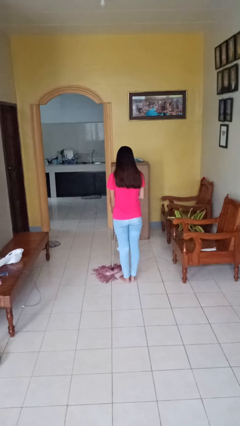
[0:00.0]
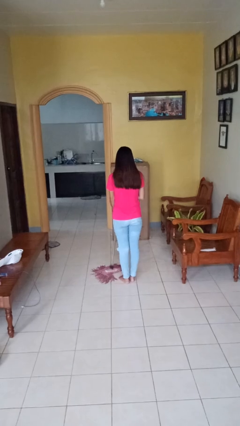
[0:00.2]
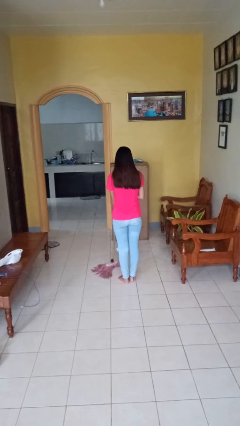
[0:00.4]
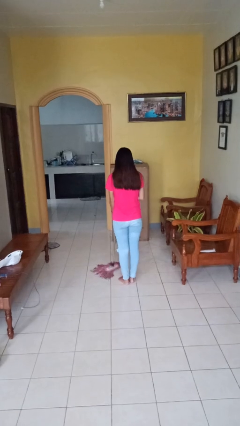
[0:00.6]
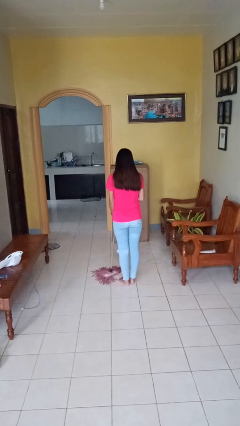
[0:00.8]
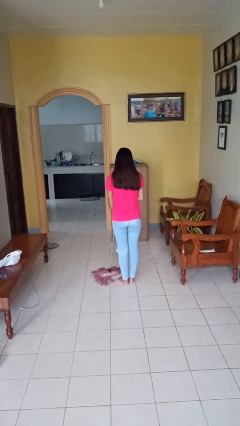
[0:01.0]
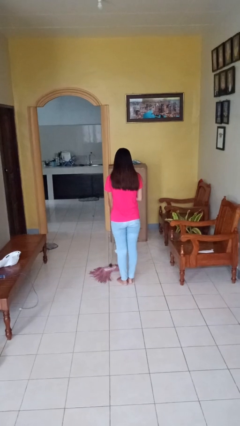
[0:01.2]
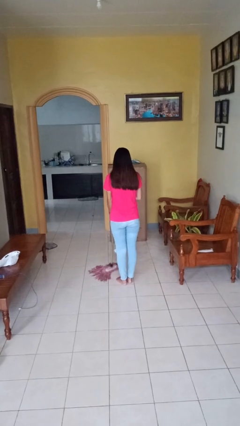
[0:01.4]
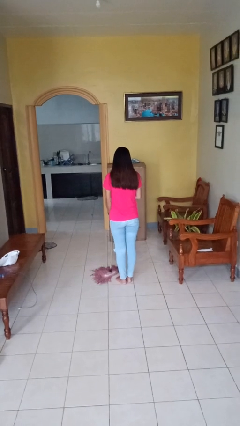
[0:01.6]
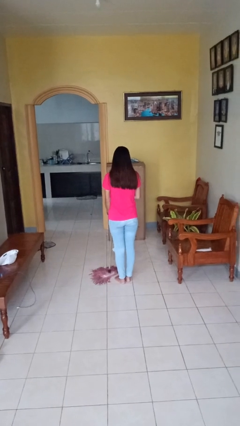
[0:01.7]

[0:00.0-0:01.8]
person mops

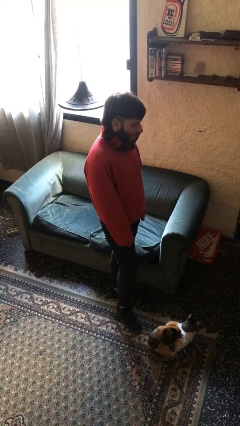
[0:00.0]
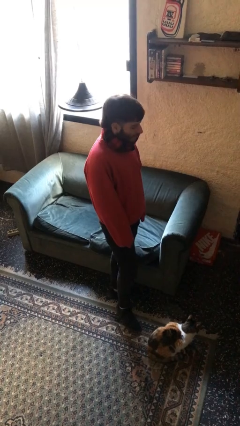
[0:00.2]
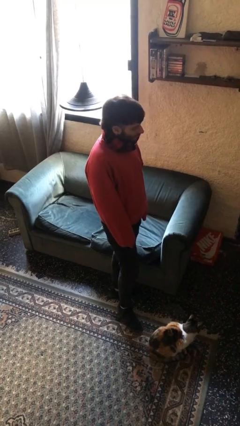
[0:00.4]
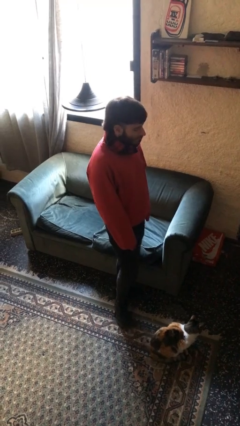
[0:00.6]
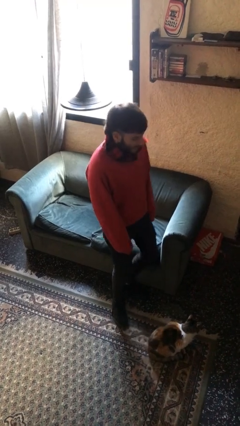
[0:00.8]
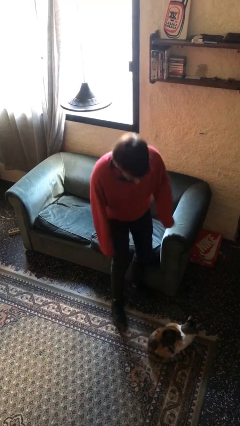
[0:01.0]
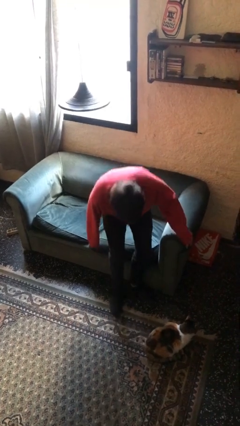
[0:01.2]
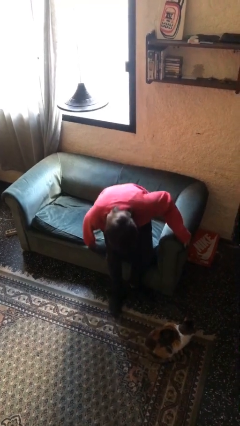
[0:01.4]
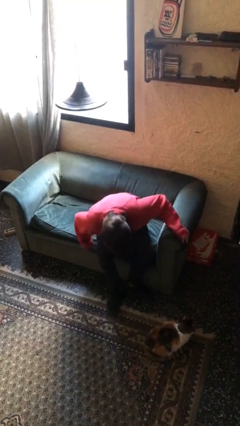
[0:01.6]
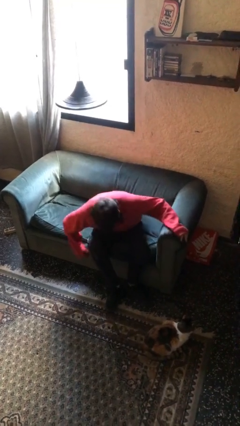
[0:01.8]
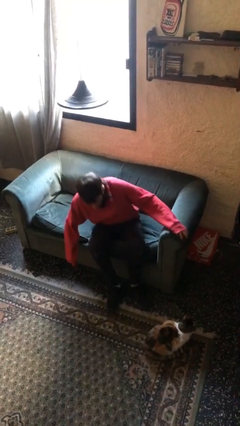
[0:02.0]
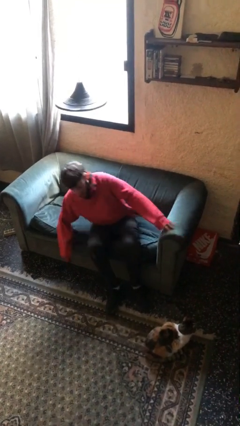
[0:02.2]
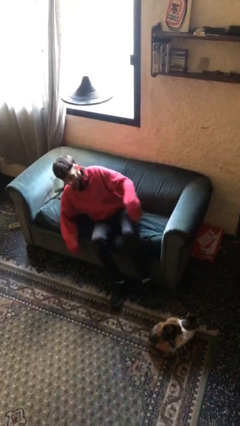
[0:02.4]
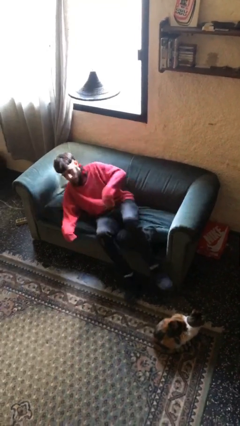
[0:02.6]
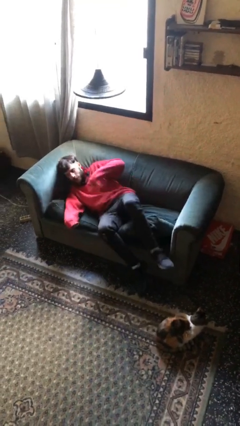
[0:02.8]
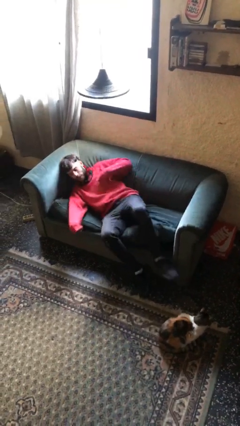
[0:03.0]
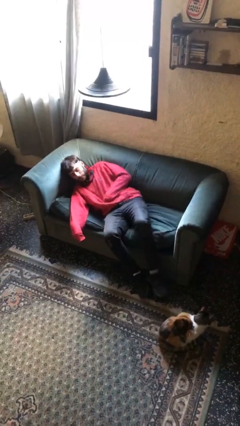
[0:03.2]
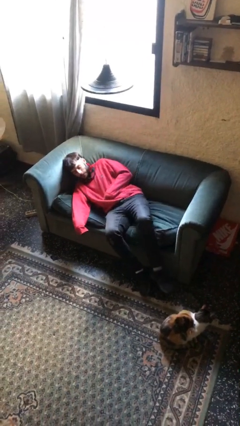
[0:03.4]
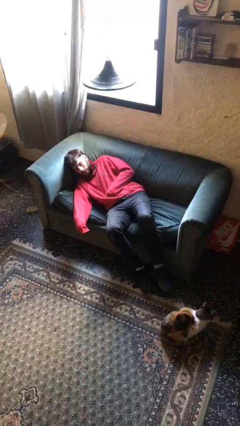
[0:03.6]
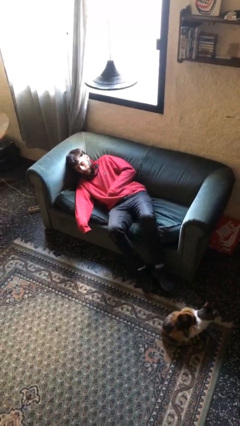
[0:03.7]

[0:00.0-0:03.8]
person lies down on couch

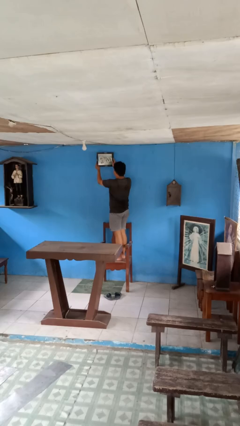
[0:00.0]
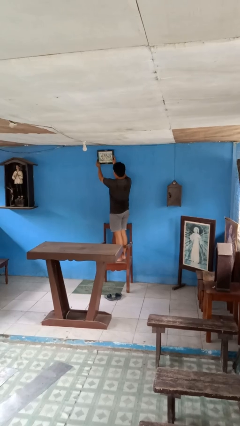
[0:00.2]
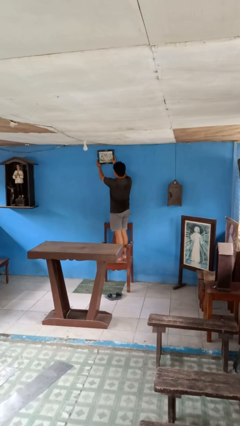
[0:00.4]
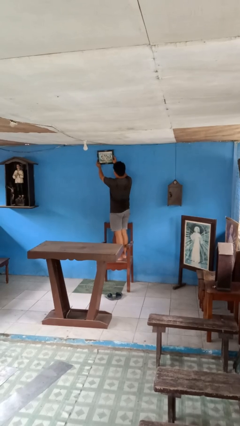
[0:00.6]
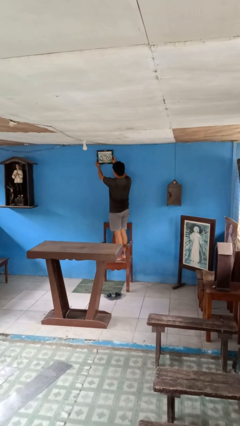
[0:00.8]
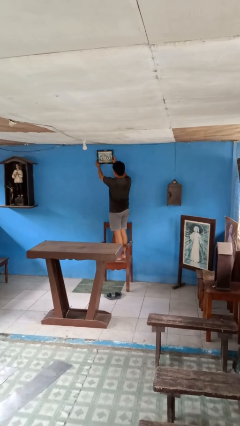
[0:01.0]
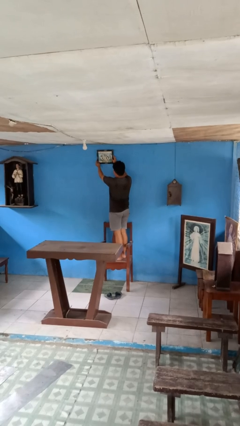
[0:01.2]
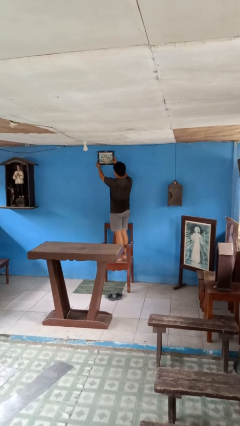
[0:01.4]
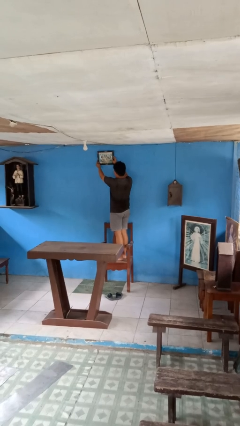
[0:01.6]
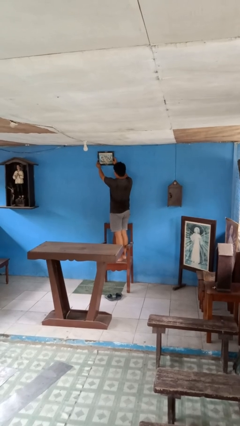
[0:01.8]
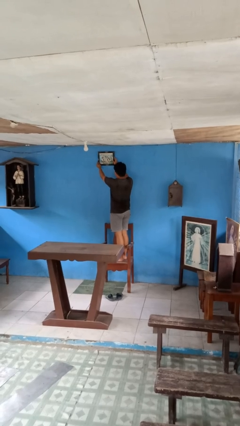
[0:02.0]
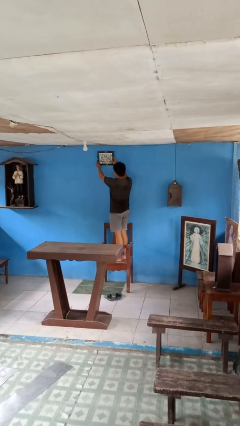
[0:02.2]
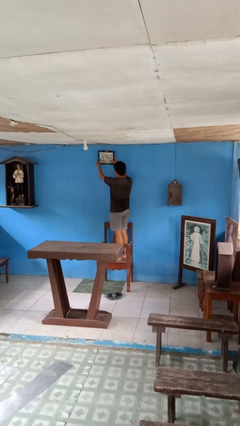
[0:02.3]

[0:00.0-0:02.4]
person puts up picture frame

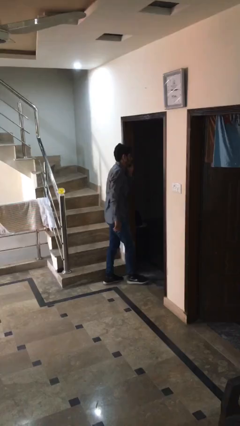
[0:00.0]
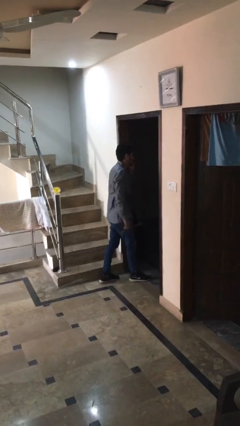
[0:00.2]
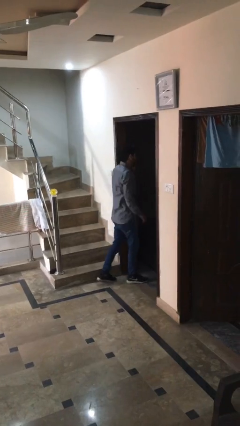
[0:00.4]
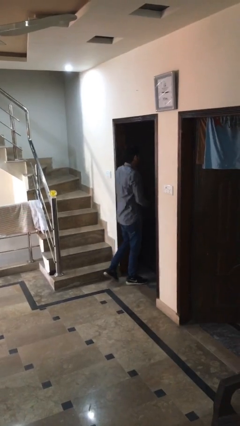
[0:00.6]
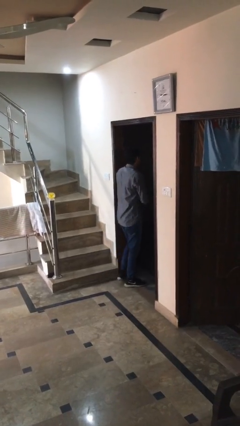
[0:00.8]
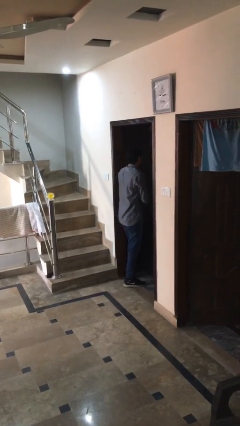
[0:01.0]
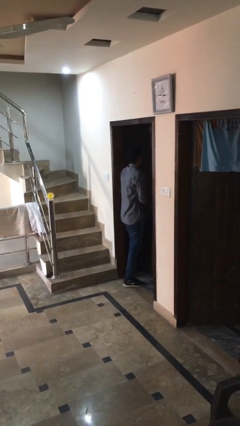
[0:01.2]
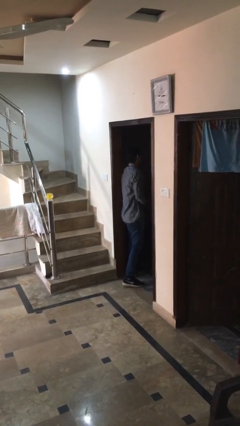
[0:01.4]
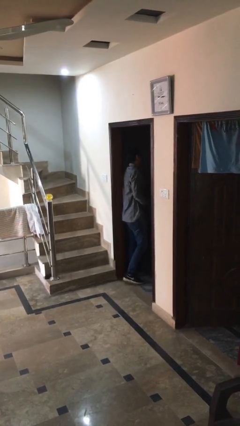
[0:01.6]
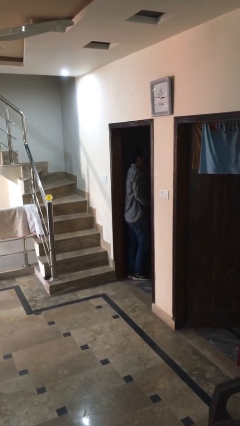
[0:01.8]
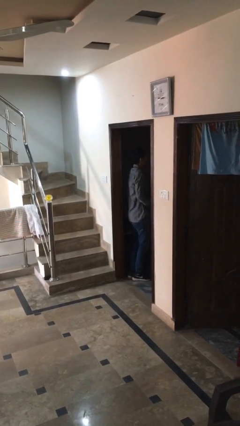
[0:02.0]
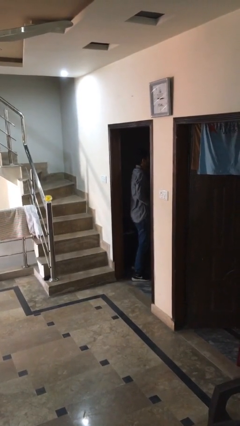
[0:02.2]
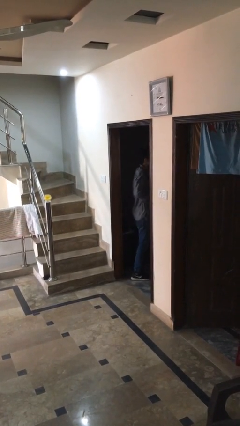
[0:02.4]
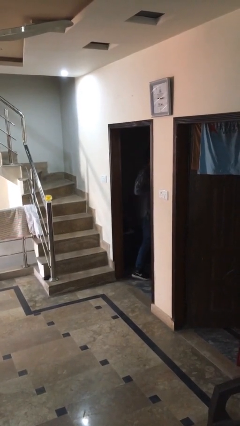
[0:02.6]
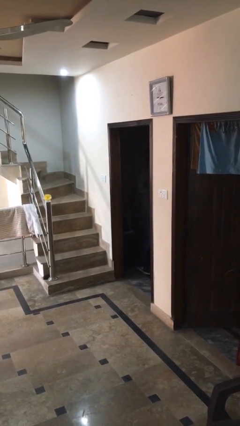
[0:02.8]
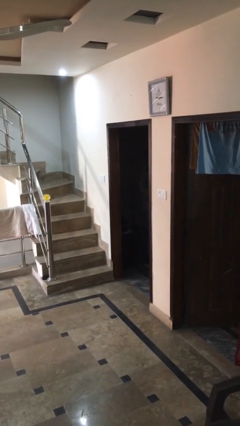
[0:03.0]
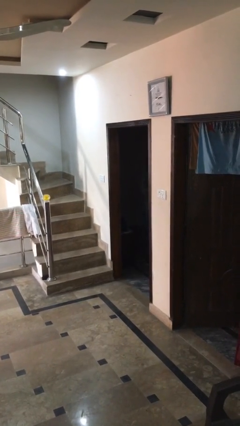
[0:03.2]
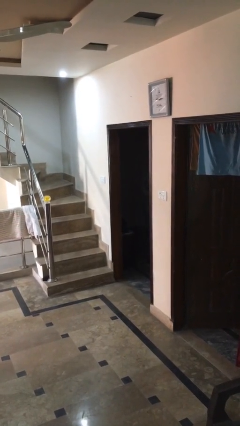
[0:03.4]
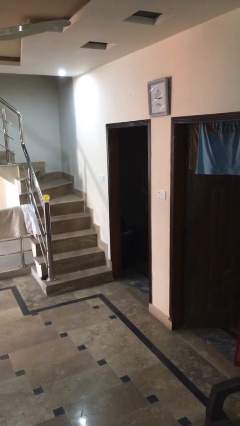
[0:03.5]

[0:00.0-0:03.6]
person exits scene through structure

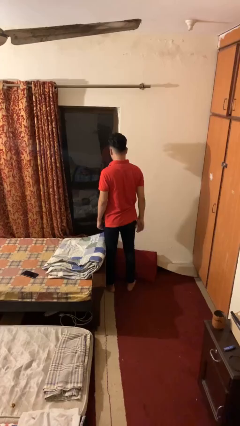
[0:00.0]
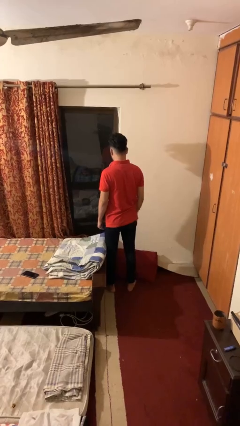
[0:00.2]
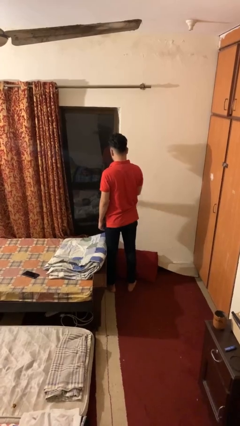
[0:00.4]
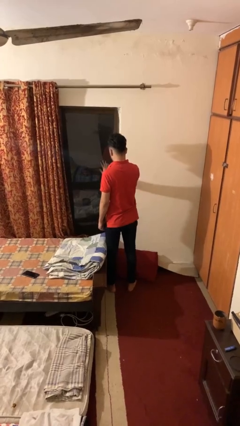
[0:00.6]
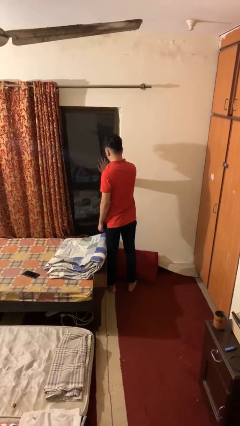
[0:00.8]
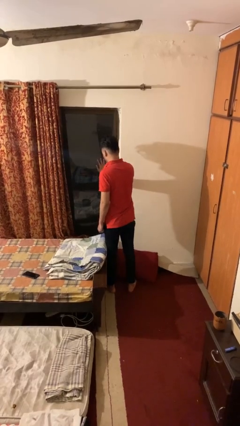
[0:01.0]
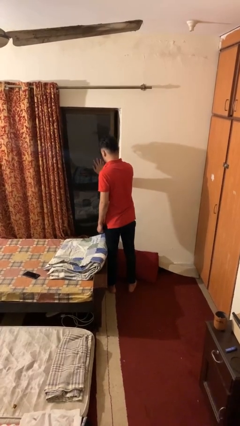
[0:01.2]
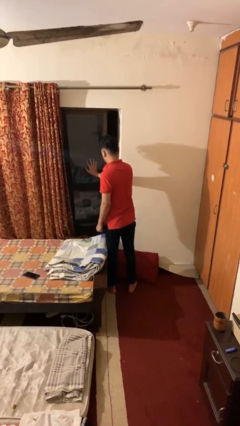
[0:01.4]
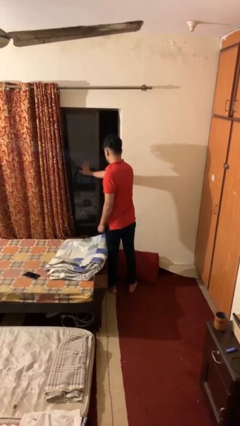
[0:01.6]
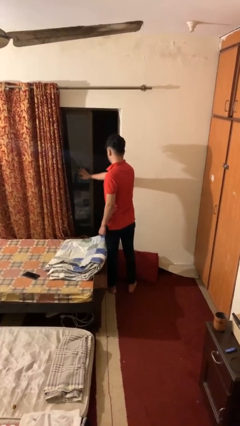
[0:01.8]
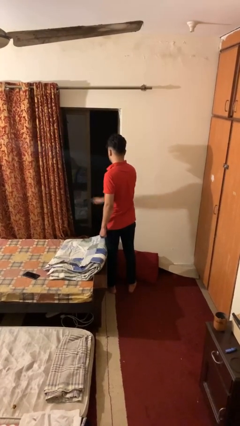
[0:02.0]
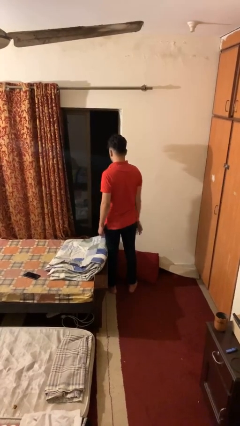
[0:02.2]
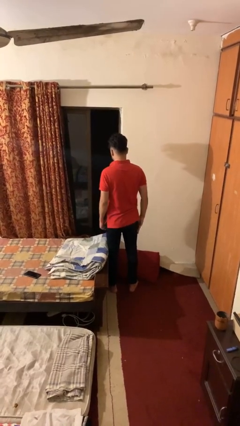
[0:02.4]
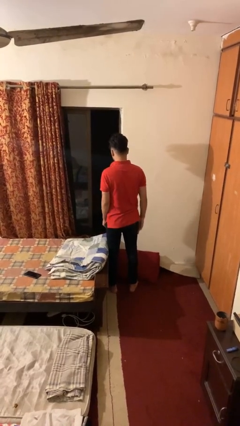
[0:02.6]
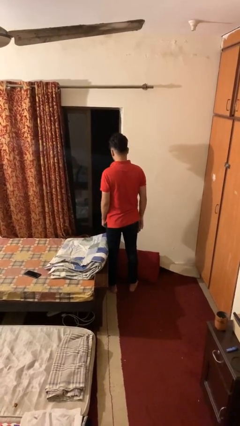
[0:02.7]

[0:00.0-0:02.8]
person opens home window

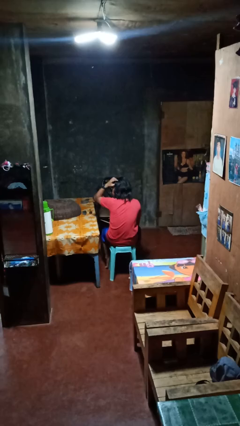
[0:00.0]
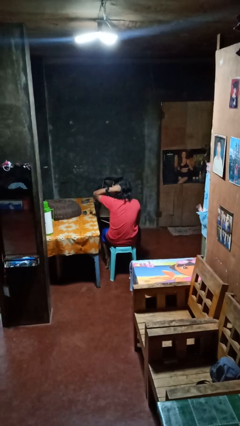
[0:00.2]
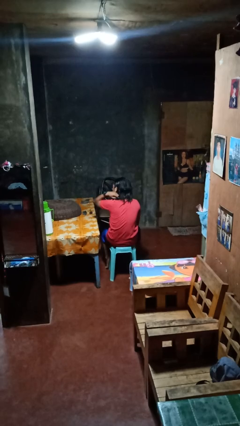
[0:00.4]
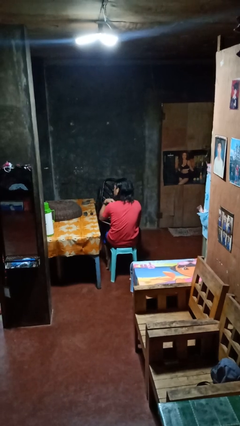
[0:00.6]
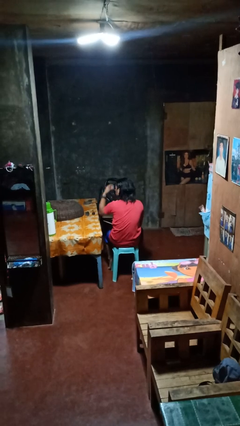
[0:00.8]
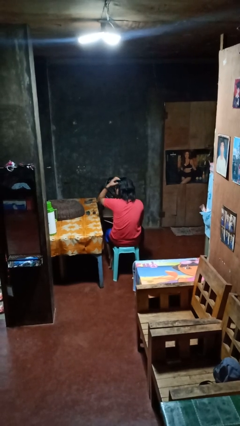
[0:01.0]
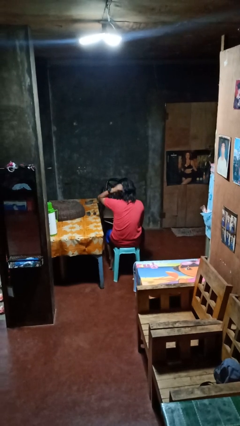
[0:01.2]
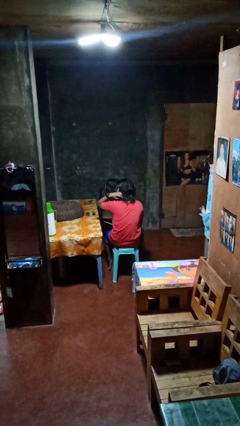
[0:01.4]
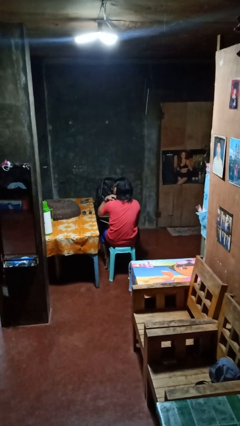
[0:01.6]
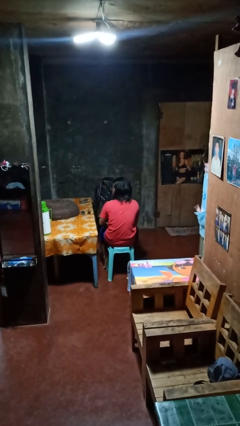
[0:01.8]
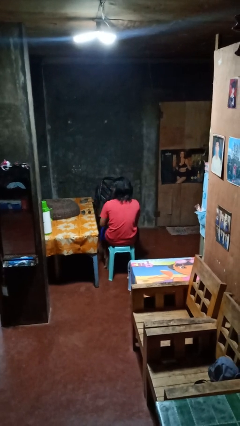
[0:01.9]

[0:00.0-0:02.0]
person strokes hair

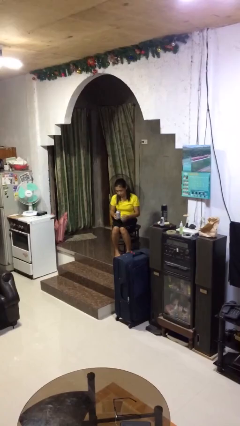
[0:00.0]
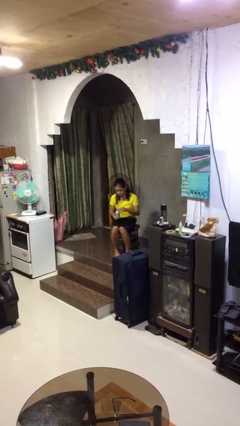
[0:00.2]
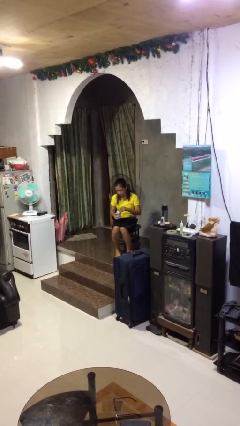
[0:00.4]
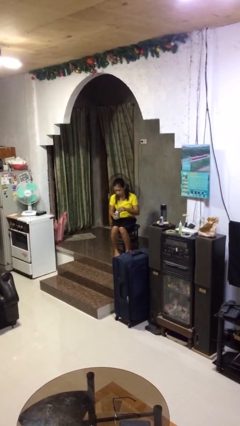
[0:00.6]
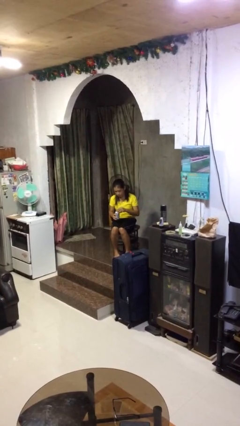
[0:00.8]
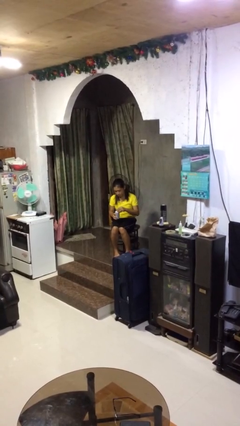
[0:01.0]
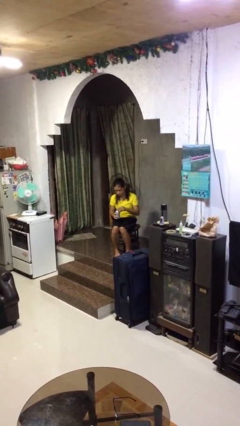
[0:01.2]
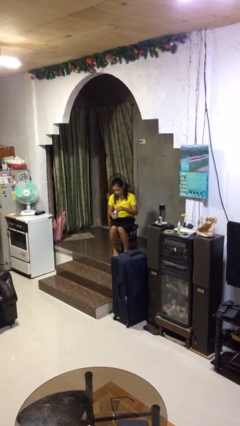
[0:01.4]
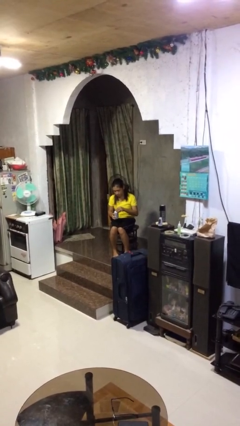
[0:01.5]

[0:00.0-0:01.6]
person opens beverage can
